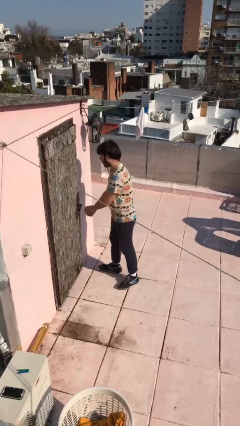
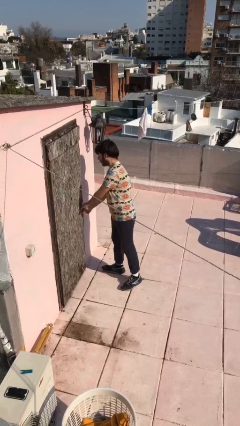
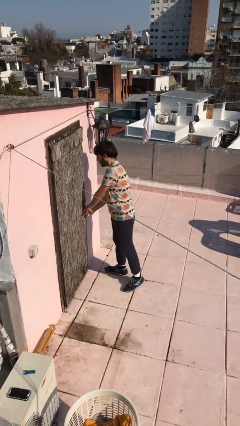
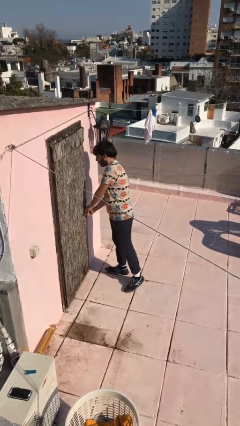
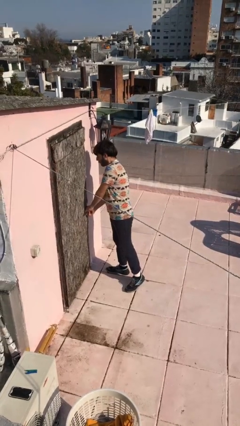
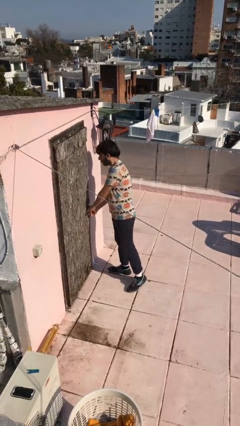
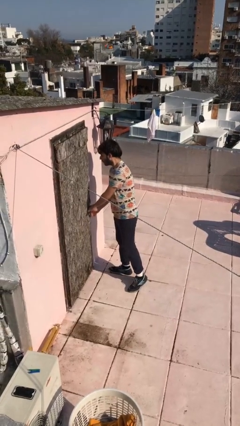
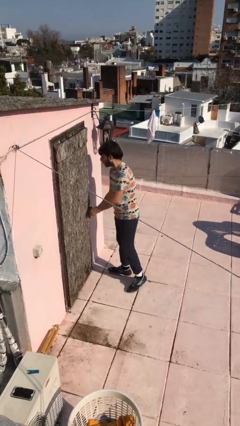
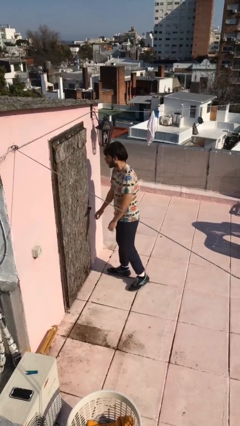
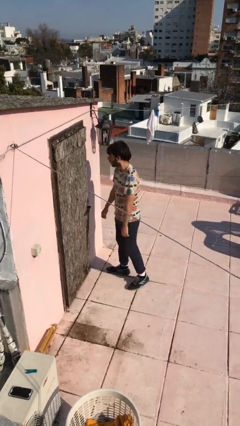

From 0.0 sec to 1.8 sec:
person locks door with keys

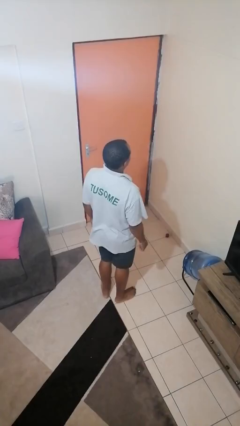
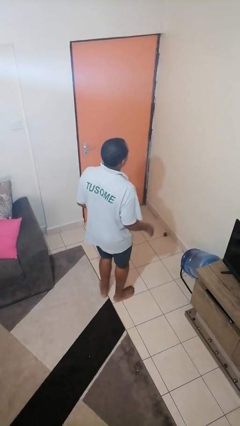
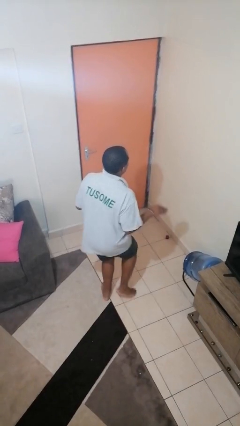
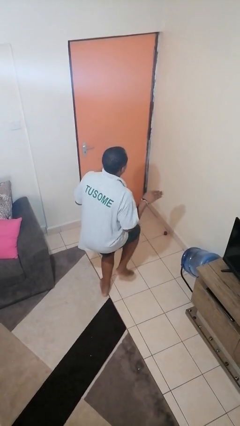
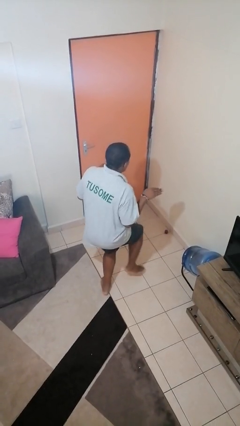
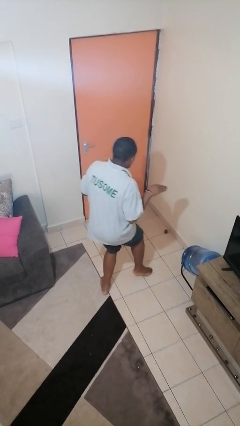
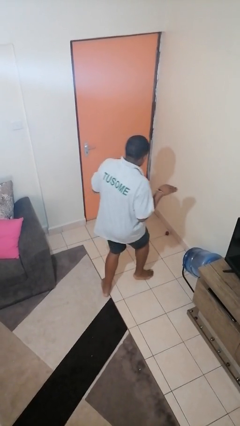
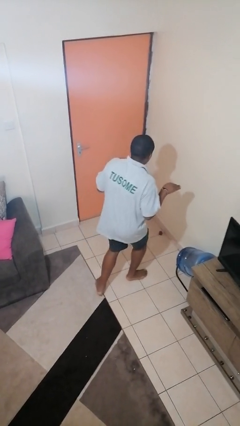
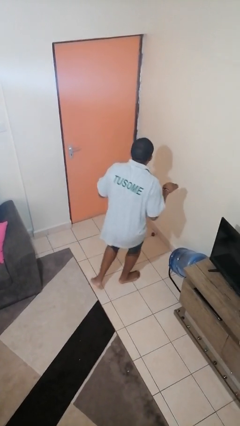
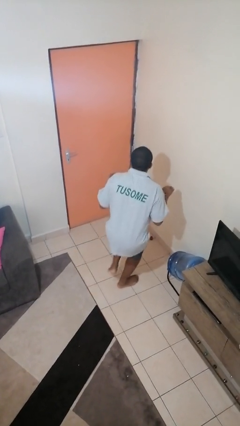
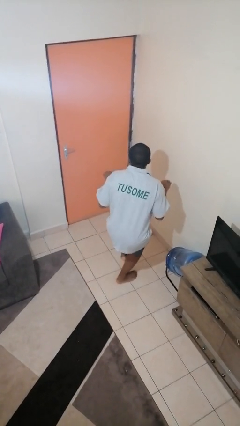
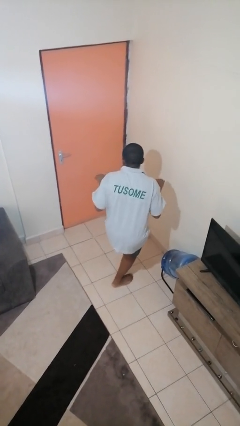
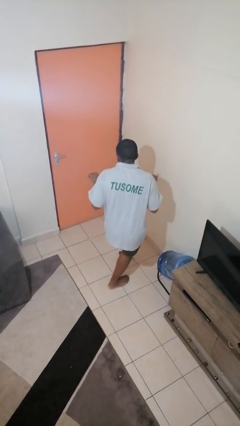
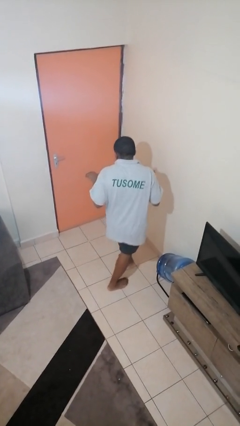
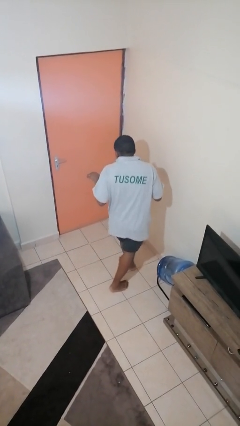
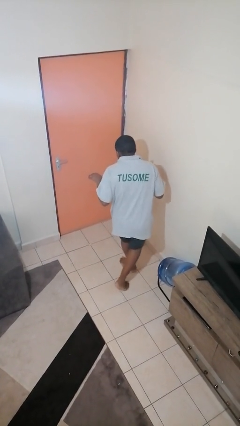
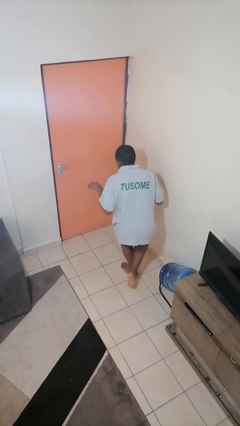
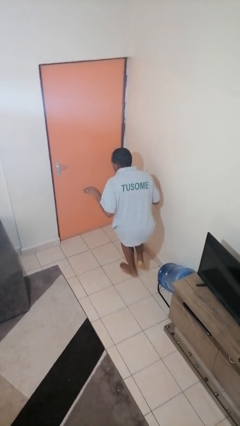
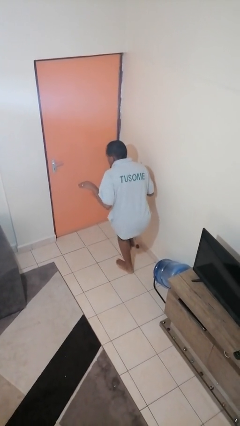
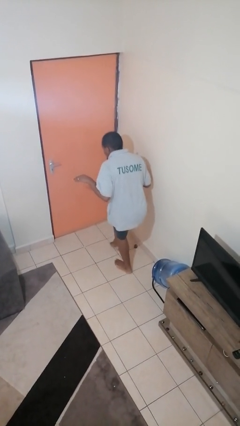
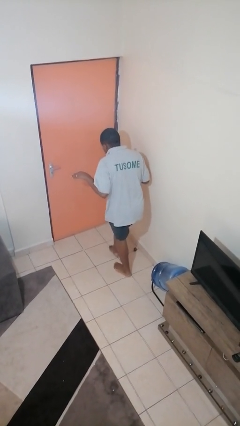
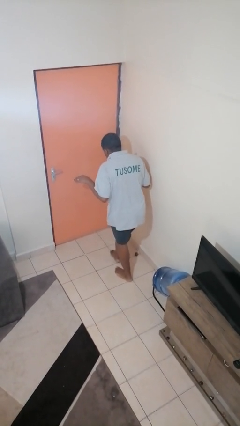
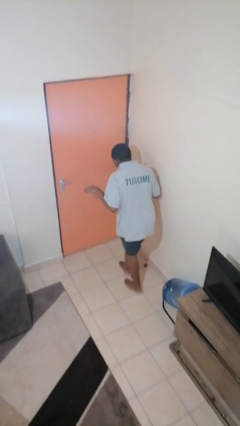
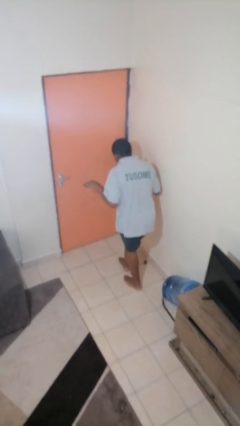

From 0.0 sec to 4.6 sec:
person walks tiptoe

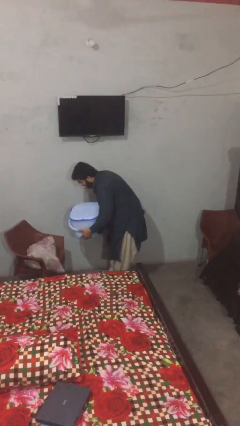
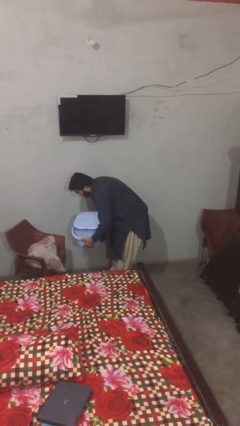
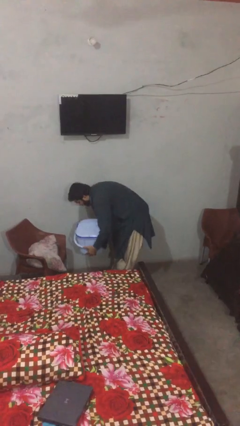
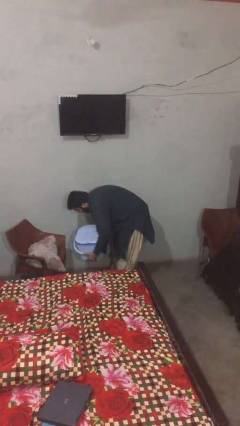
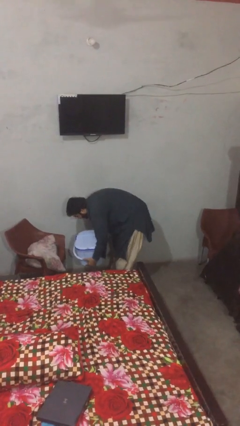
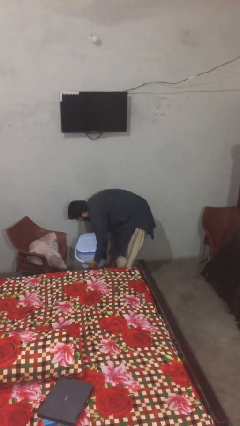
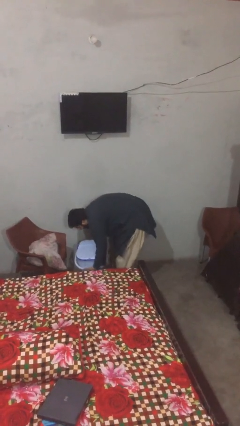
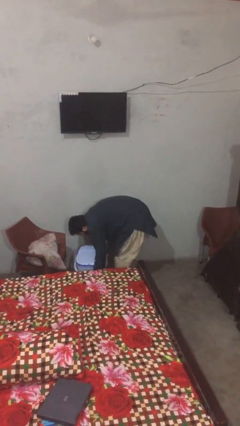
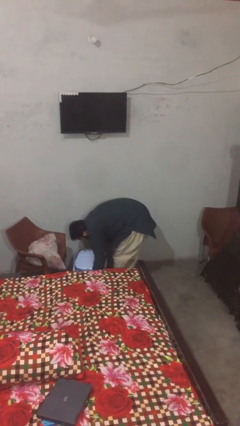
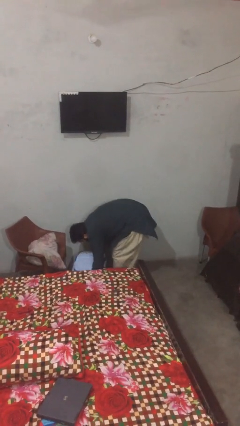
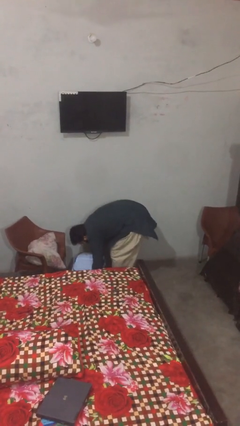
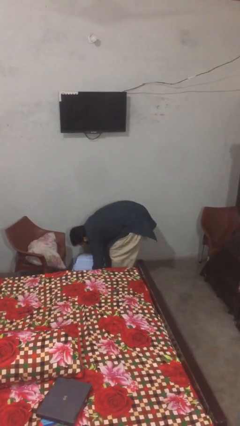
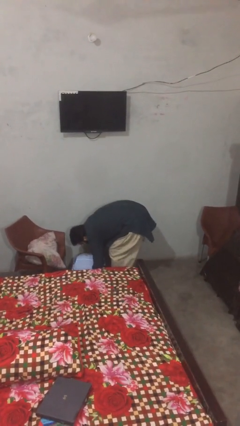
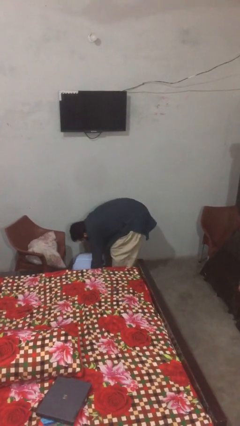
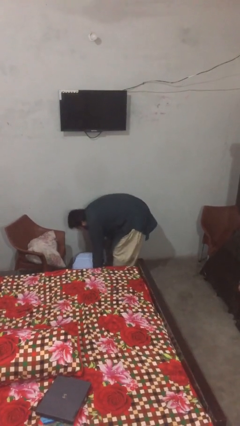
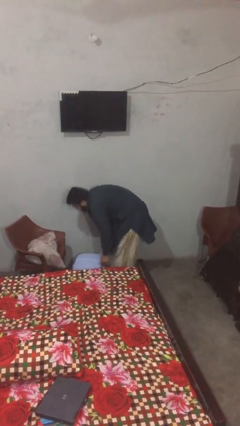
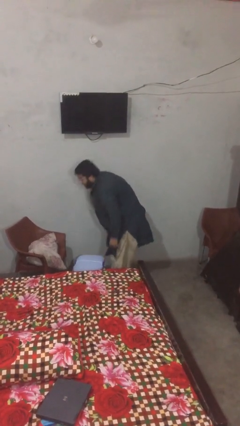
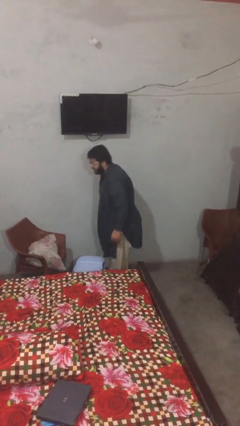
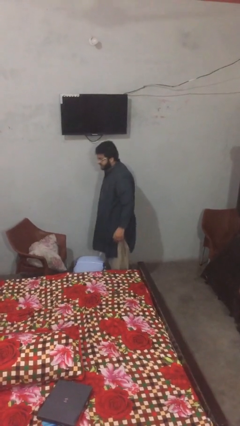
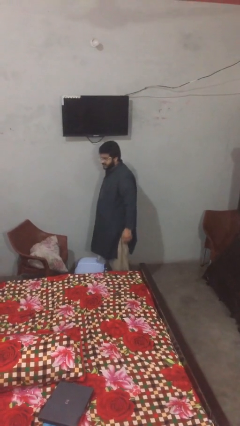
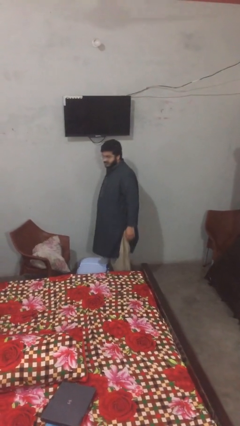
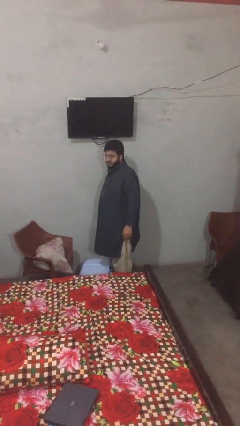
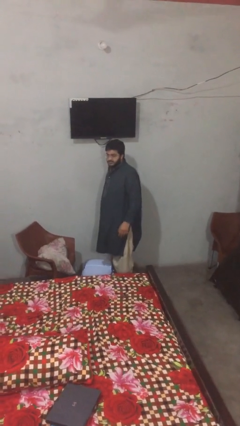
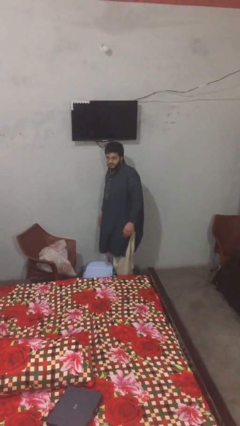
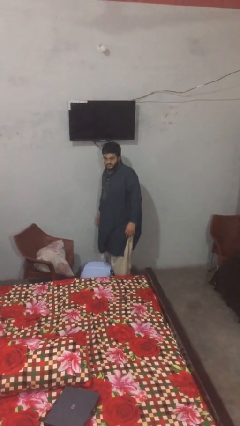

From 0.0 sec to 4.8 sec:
person puts down object on floor

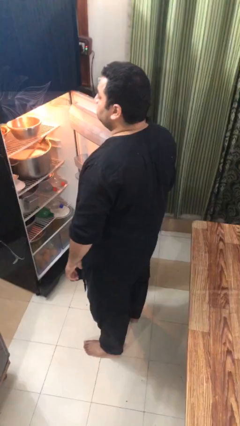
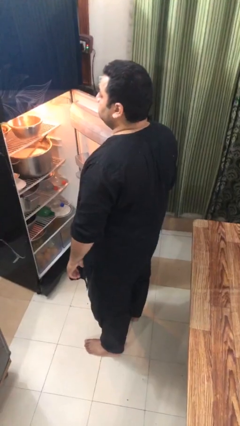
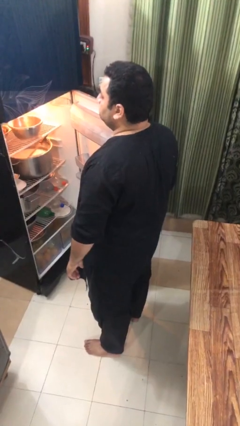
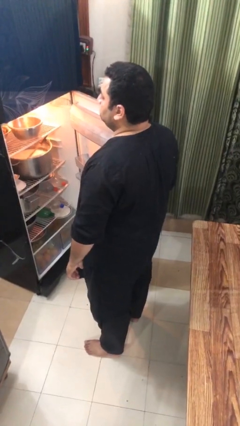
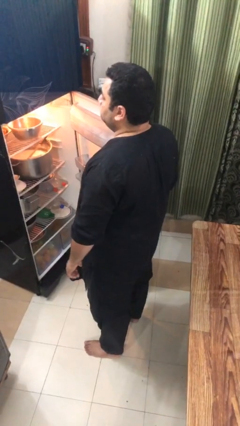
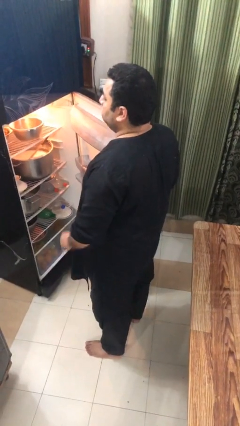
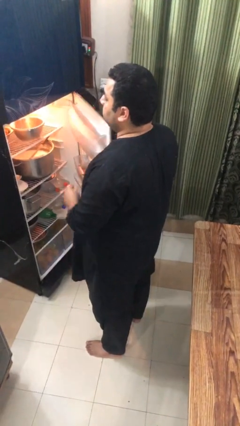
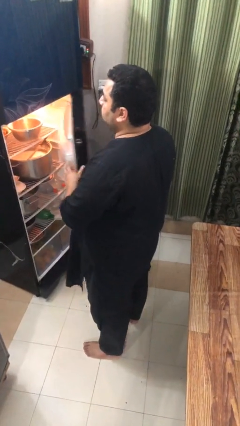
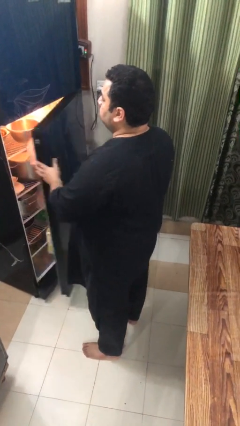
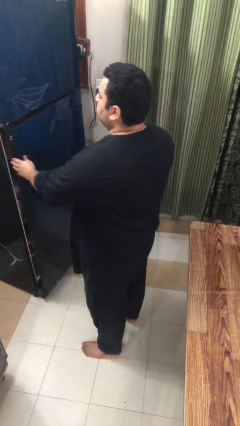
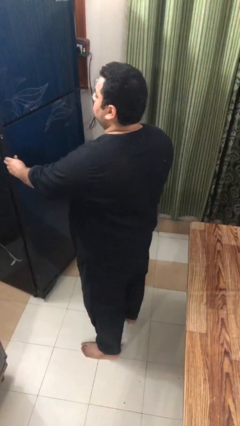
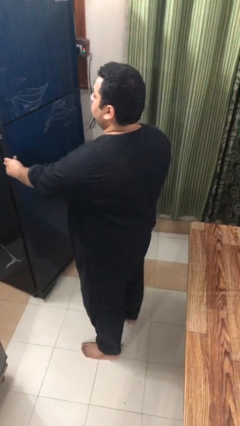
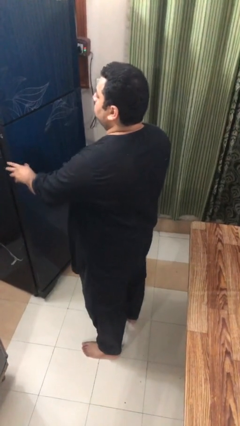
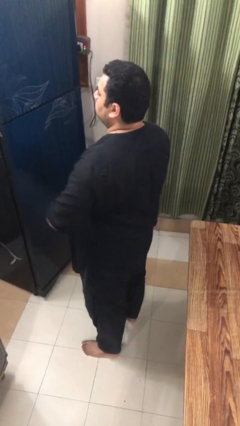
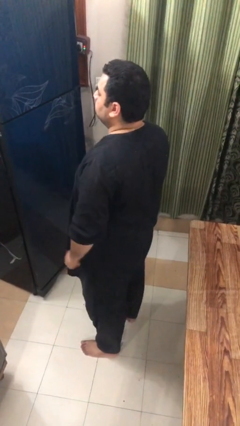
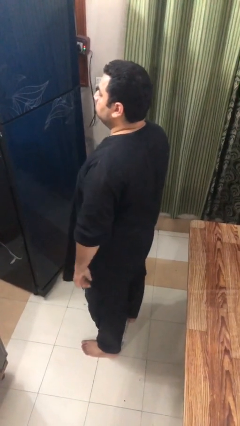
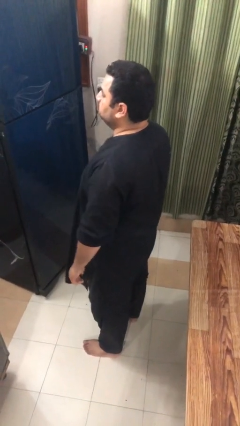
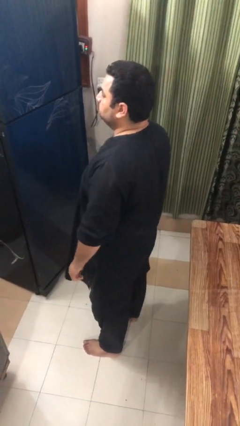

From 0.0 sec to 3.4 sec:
person closes refrigerator

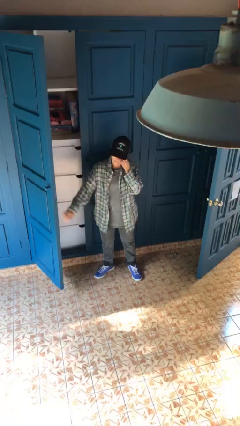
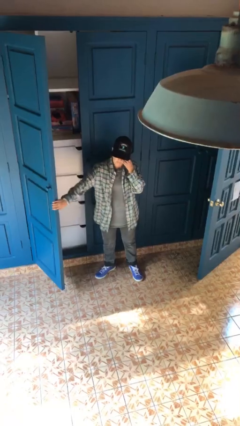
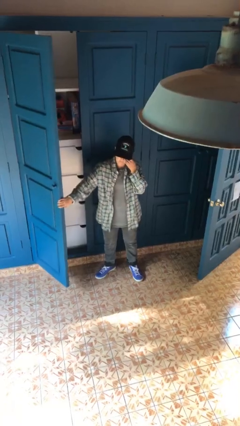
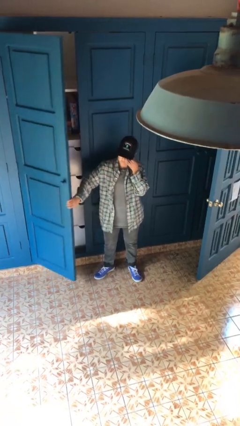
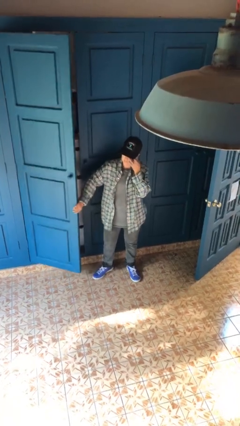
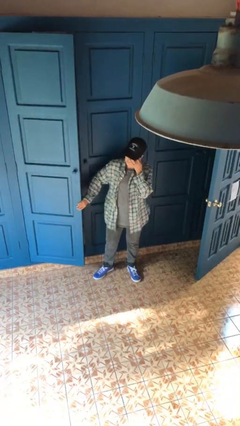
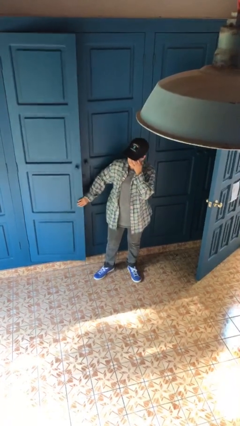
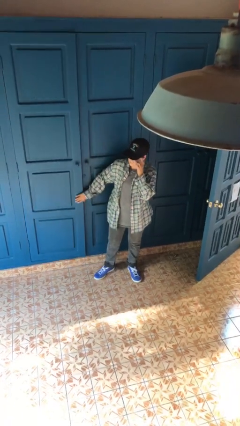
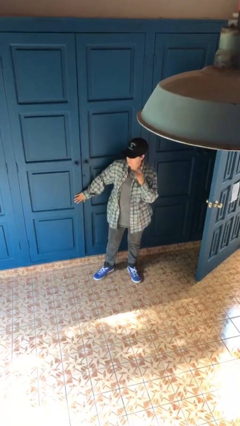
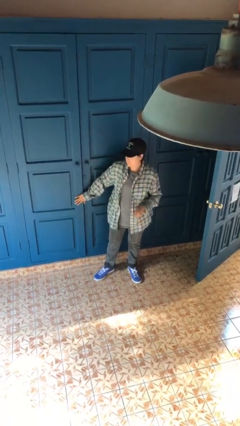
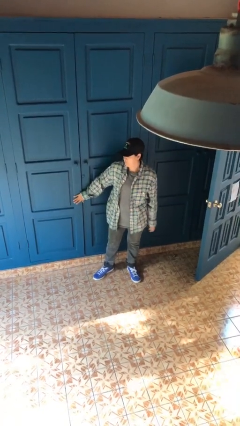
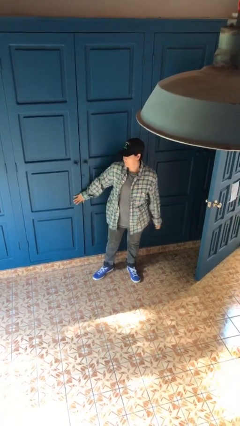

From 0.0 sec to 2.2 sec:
person closes closet door

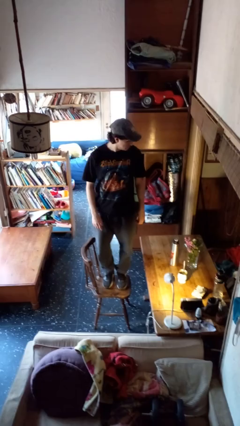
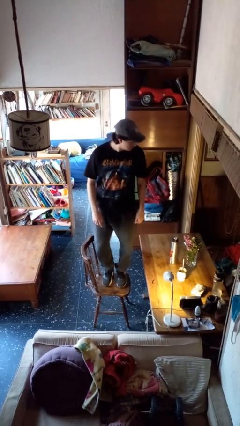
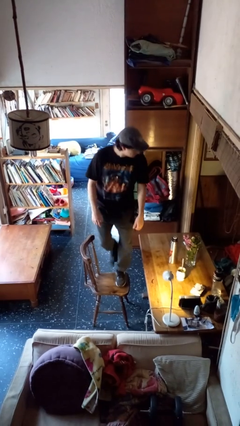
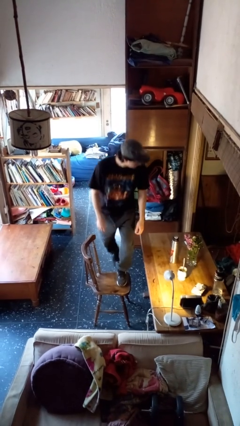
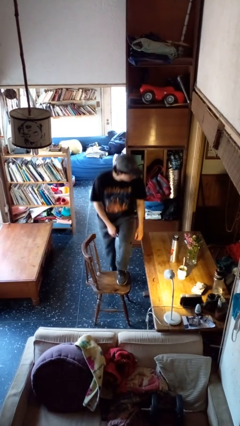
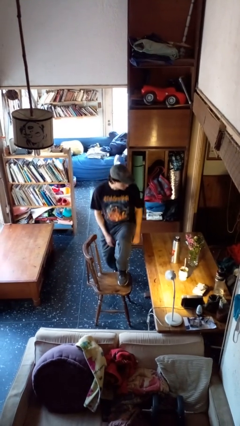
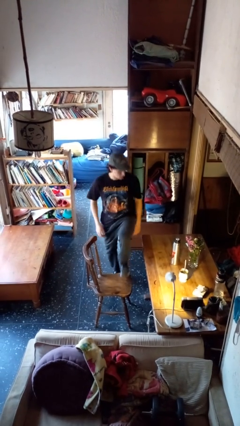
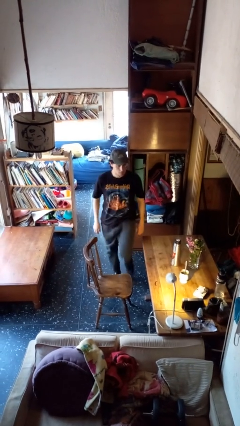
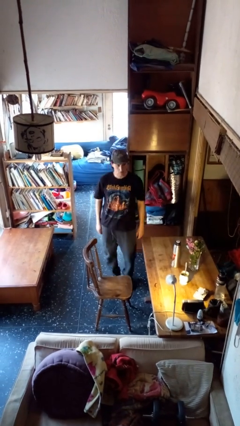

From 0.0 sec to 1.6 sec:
person climbs off chair
